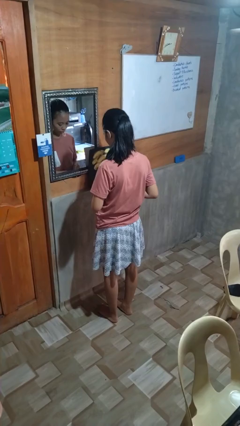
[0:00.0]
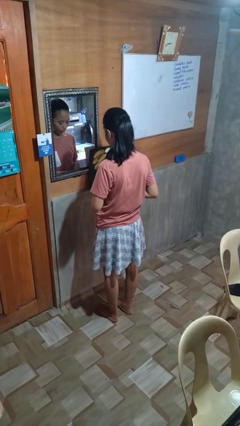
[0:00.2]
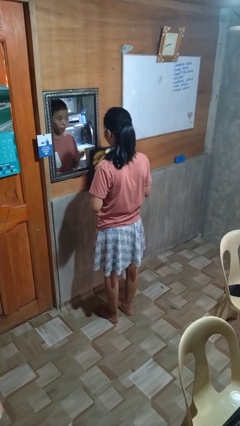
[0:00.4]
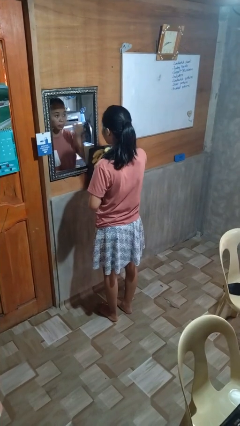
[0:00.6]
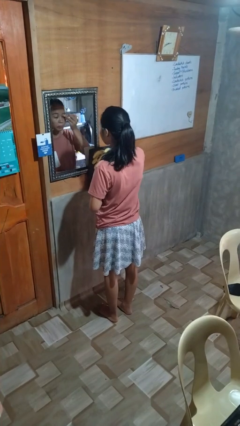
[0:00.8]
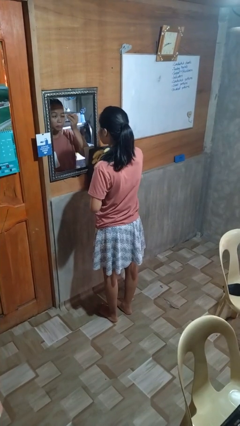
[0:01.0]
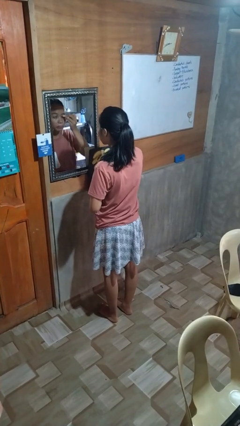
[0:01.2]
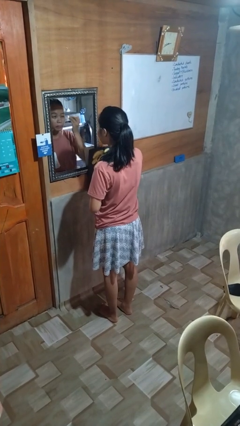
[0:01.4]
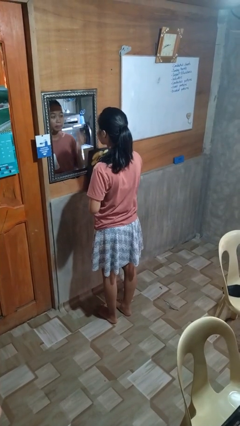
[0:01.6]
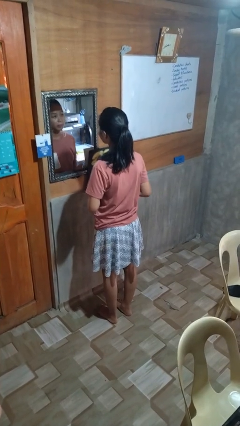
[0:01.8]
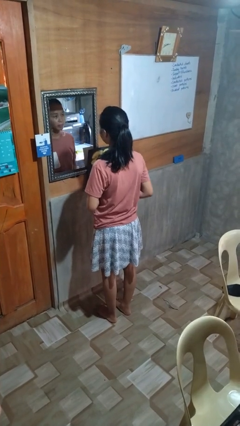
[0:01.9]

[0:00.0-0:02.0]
person applies eye makeup

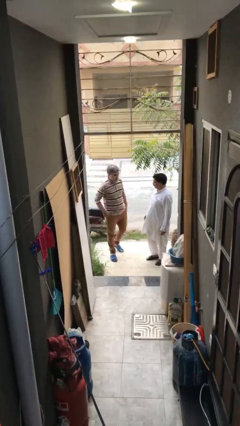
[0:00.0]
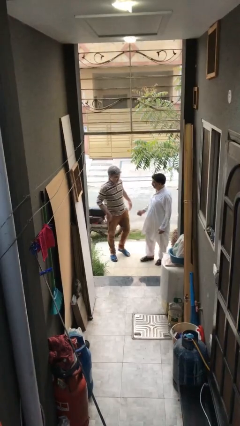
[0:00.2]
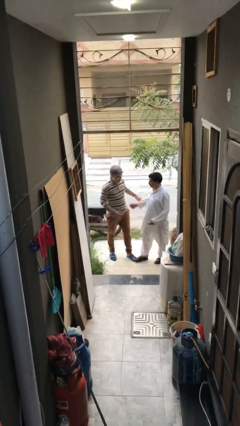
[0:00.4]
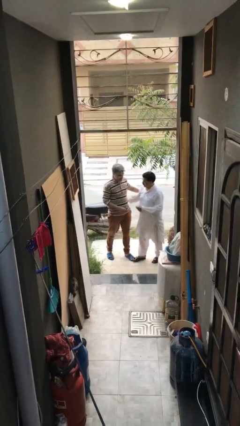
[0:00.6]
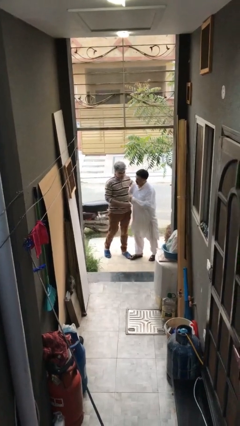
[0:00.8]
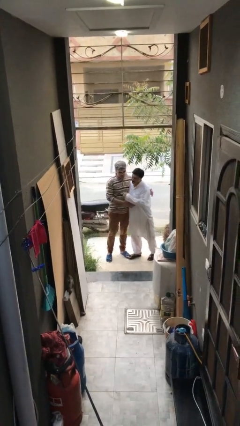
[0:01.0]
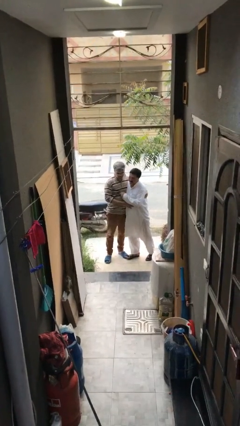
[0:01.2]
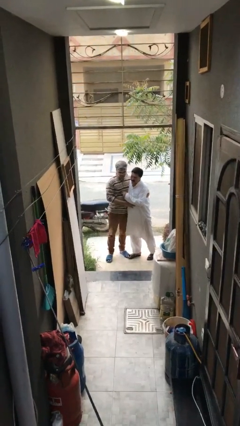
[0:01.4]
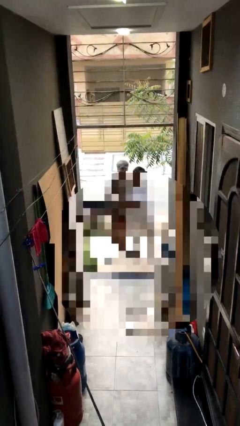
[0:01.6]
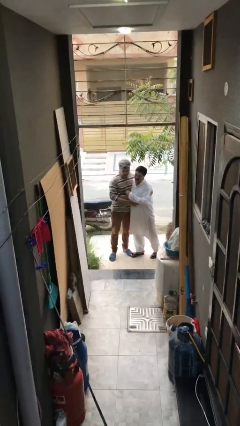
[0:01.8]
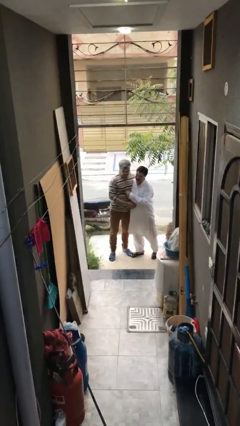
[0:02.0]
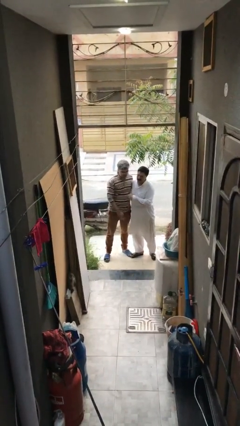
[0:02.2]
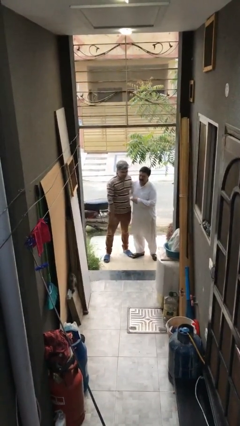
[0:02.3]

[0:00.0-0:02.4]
person embraces person

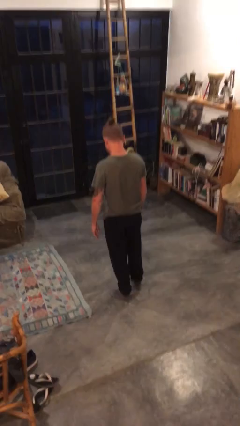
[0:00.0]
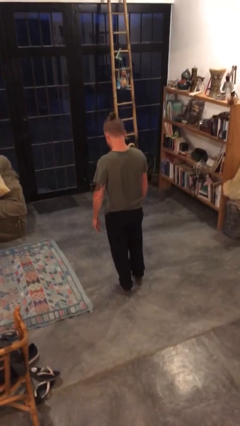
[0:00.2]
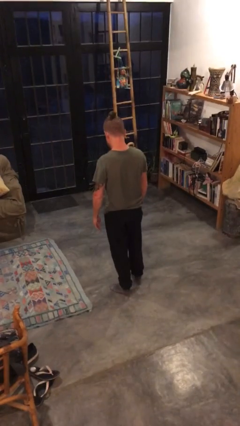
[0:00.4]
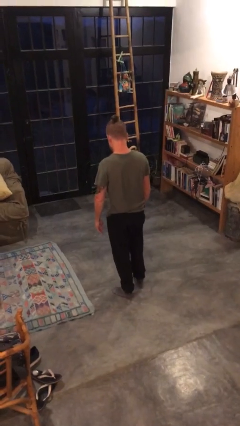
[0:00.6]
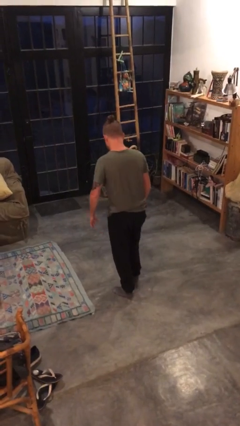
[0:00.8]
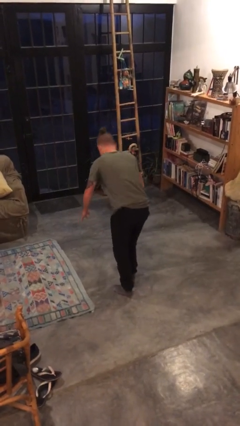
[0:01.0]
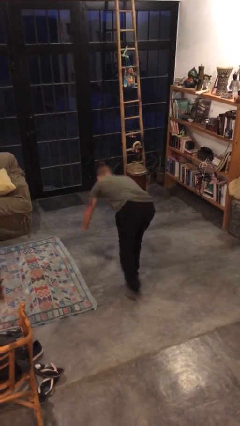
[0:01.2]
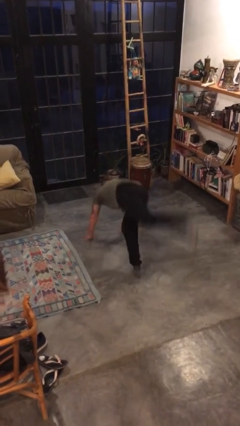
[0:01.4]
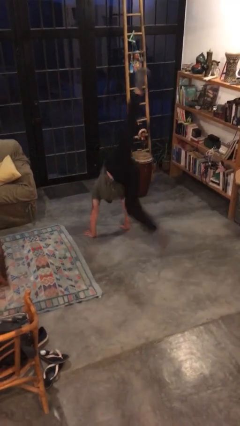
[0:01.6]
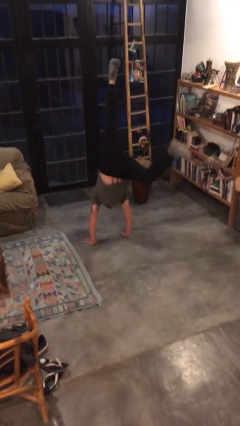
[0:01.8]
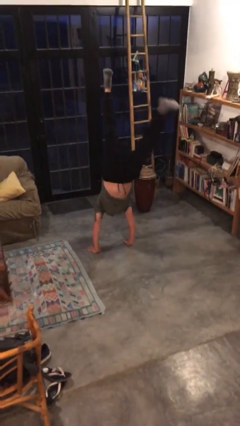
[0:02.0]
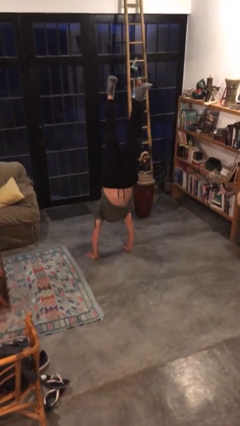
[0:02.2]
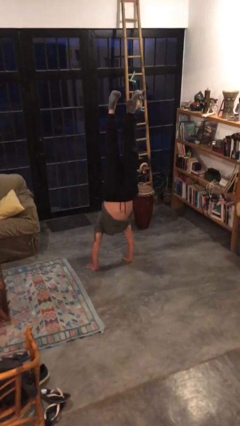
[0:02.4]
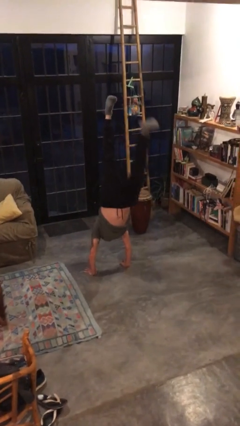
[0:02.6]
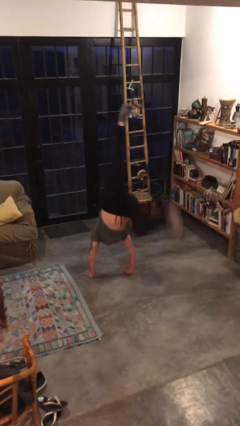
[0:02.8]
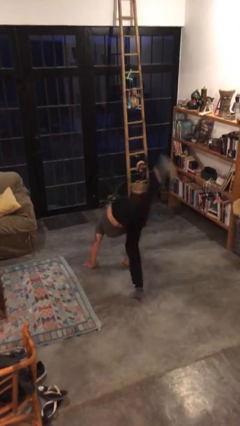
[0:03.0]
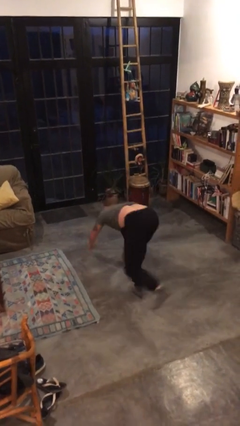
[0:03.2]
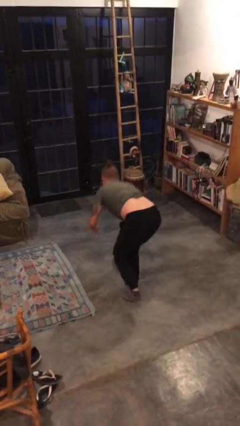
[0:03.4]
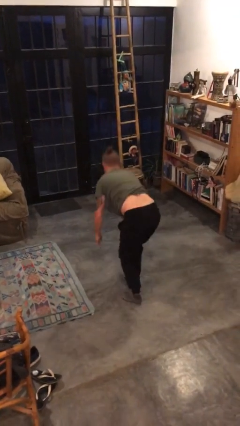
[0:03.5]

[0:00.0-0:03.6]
person handstand

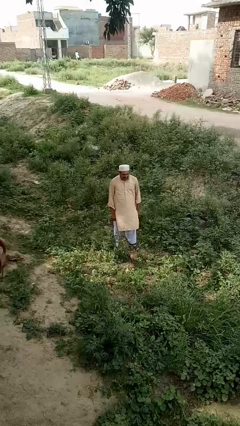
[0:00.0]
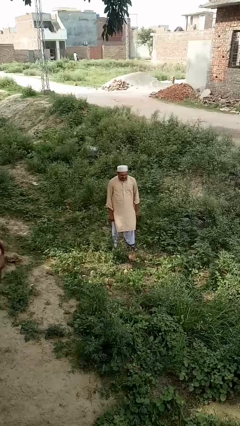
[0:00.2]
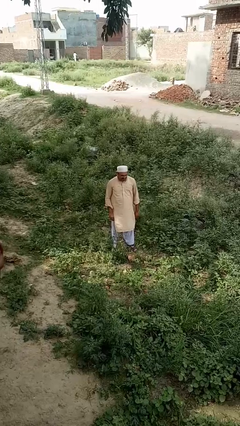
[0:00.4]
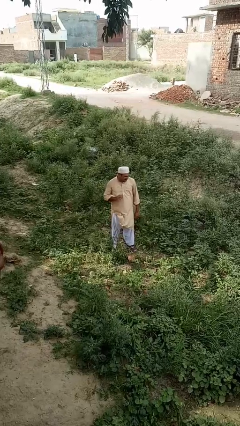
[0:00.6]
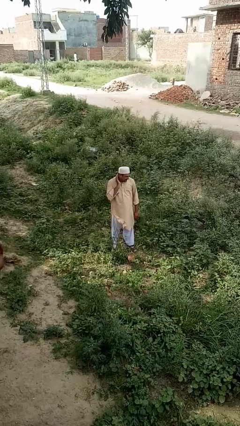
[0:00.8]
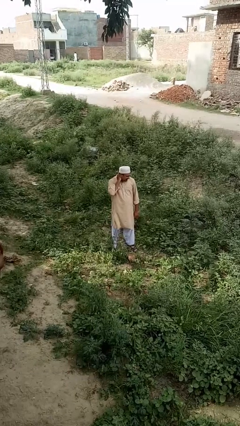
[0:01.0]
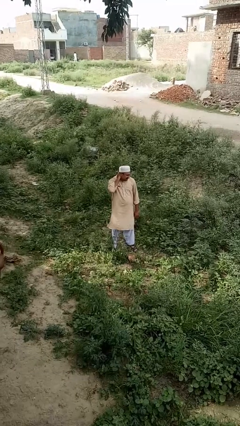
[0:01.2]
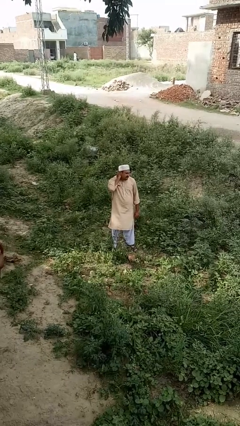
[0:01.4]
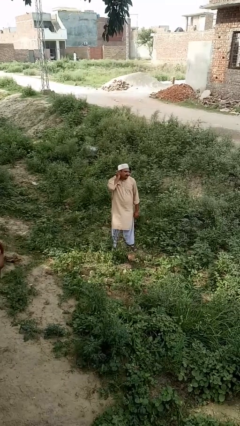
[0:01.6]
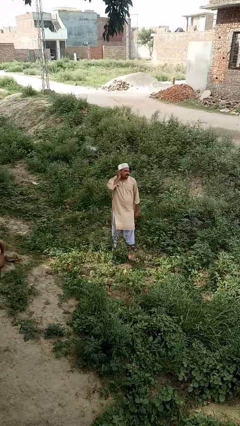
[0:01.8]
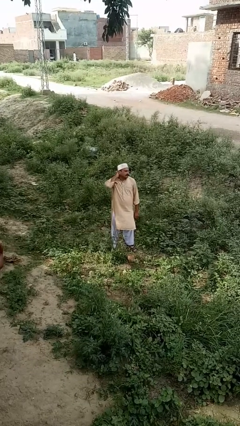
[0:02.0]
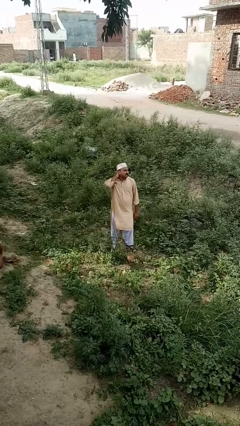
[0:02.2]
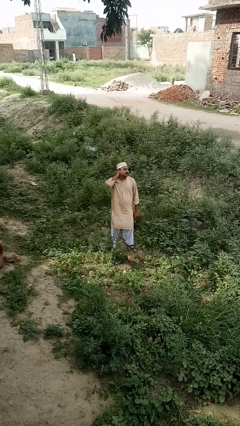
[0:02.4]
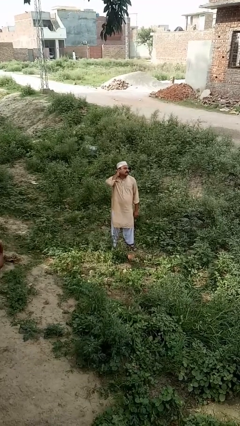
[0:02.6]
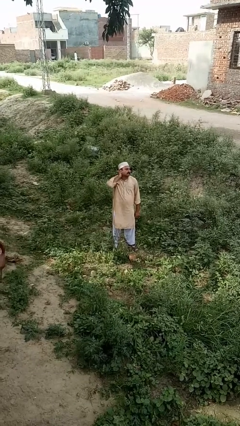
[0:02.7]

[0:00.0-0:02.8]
person rubs neck

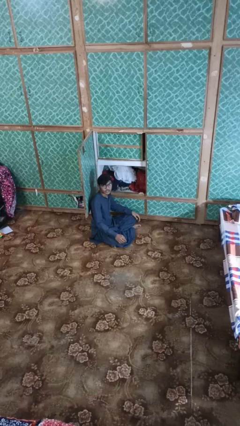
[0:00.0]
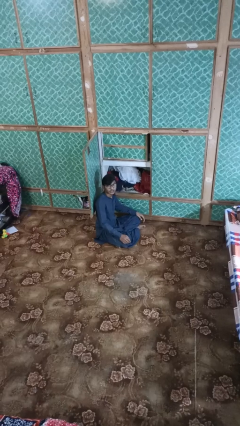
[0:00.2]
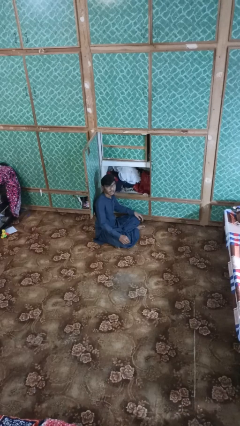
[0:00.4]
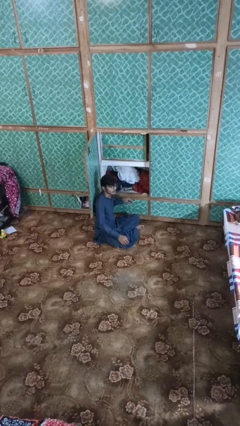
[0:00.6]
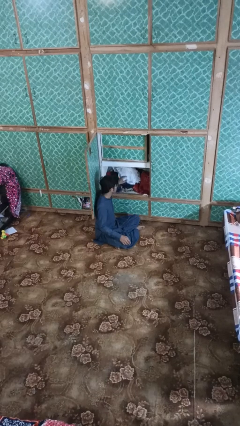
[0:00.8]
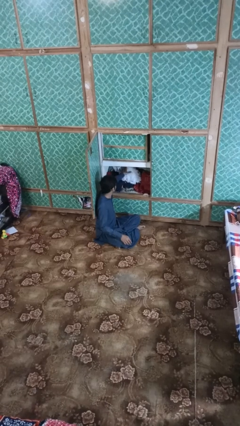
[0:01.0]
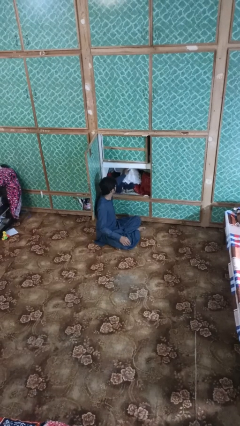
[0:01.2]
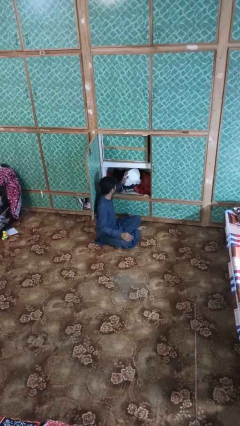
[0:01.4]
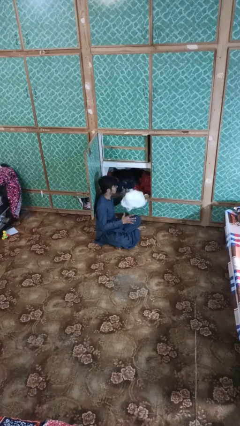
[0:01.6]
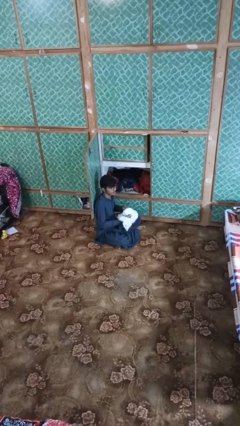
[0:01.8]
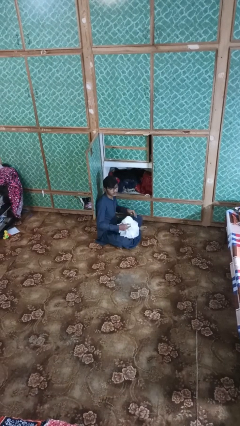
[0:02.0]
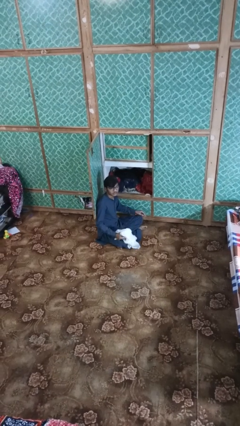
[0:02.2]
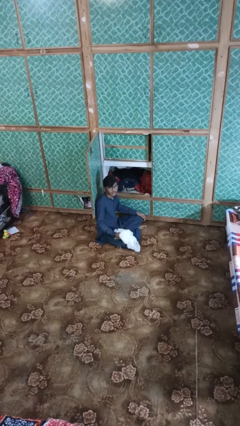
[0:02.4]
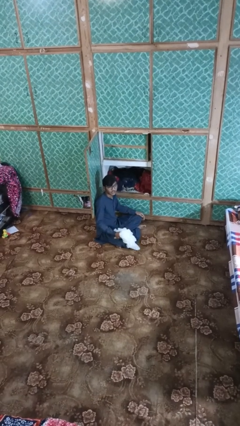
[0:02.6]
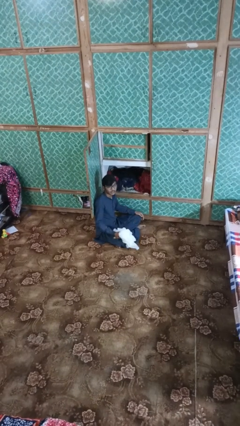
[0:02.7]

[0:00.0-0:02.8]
person takes clothes from dresser

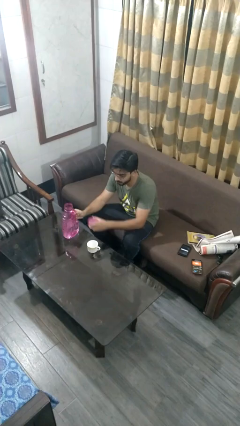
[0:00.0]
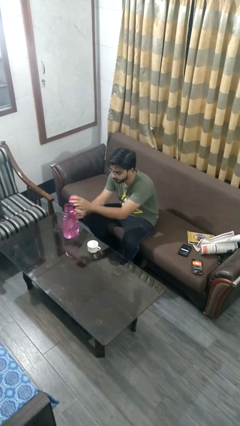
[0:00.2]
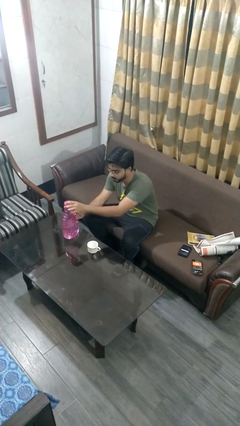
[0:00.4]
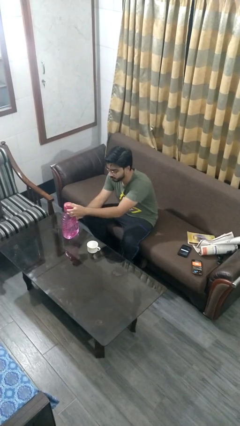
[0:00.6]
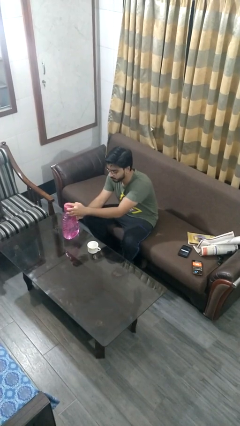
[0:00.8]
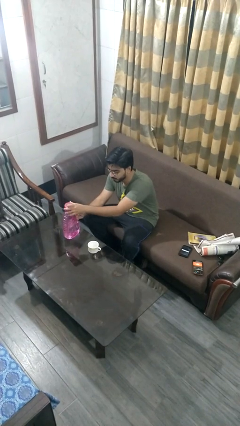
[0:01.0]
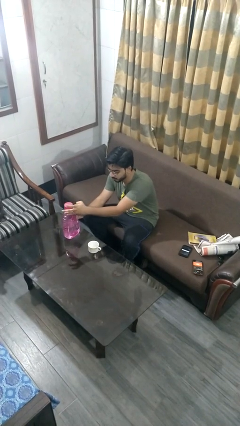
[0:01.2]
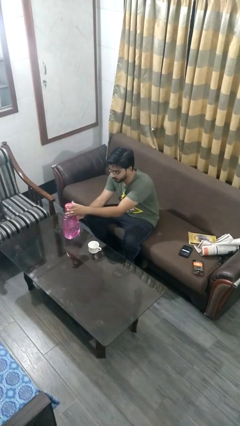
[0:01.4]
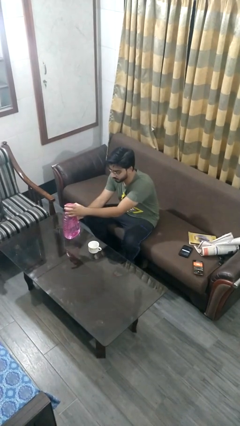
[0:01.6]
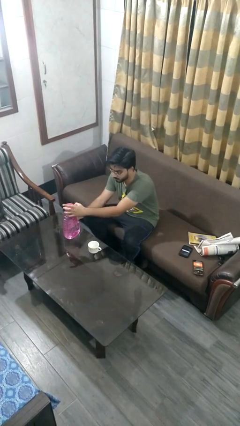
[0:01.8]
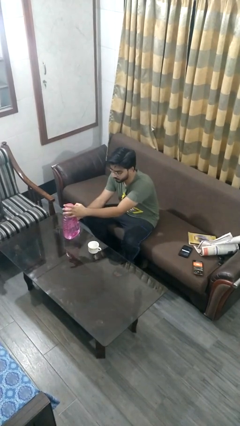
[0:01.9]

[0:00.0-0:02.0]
person screws lid to bottle

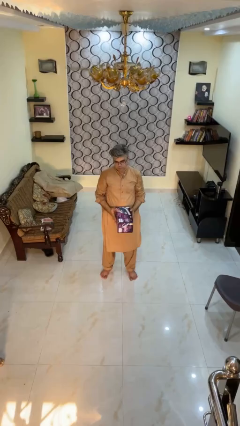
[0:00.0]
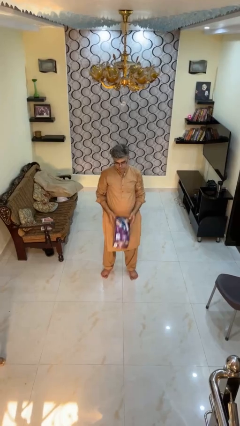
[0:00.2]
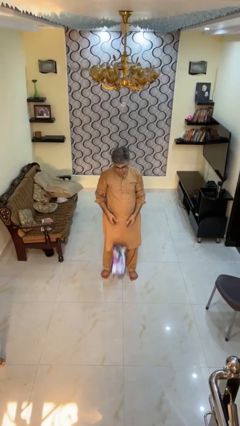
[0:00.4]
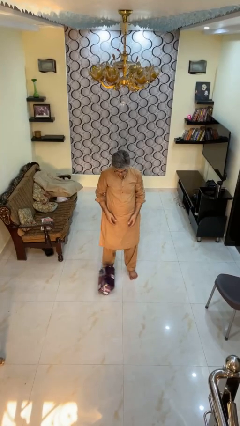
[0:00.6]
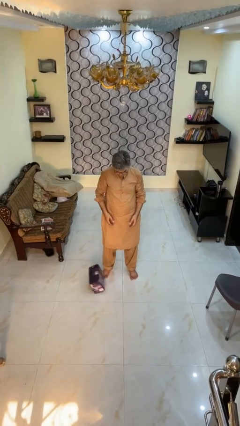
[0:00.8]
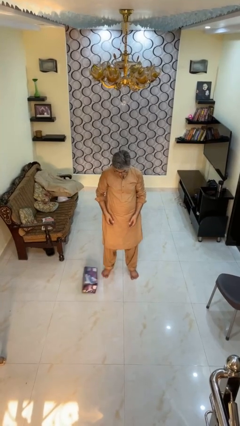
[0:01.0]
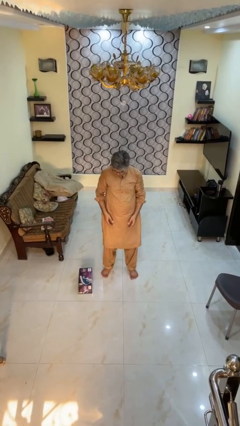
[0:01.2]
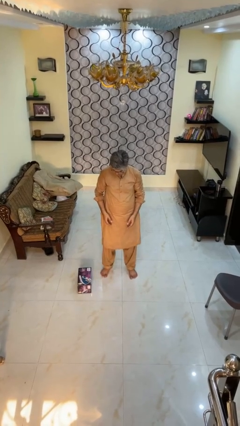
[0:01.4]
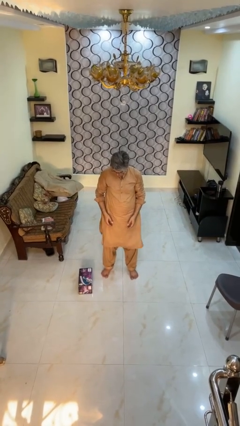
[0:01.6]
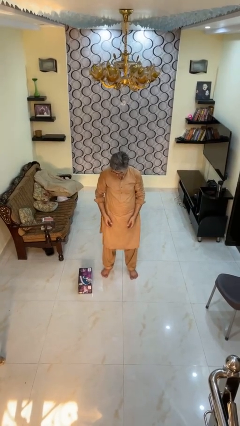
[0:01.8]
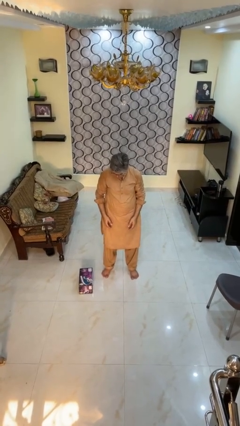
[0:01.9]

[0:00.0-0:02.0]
person drops object
